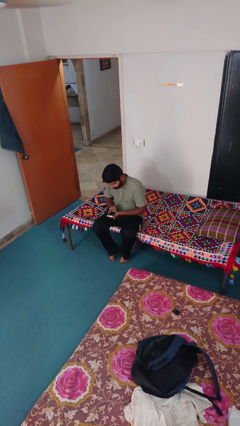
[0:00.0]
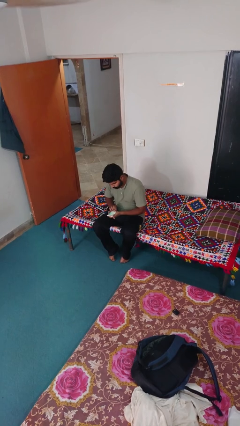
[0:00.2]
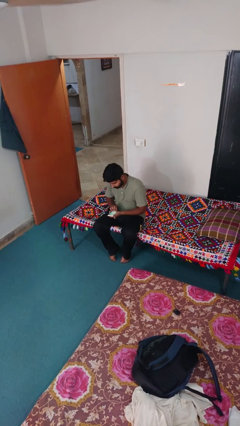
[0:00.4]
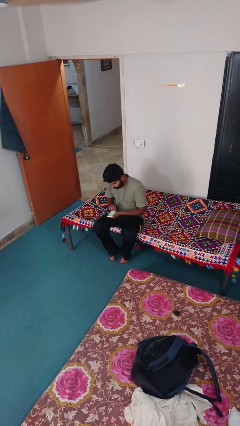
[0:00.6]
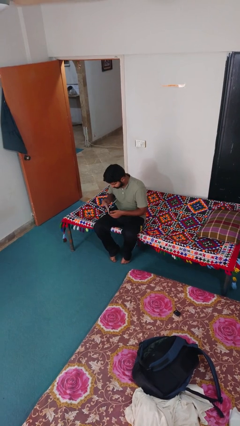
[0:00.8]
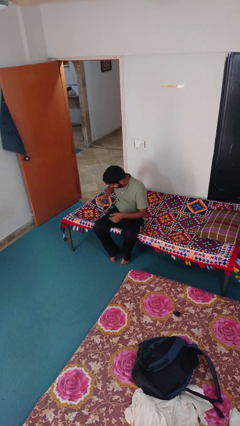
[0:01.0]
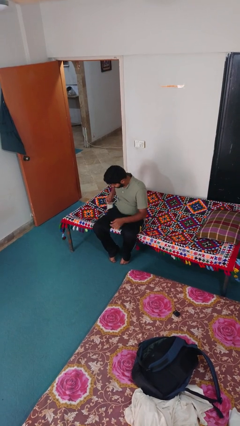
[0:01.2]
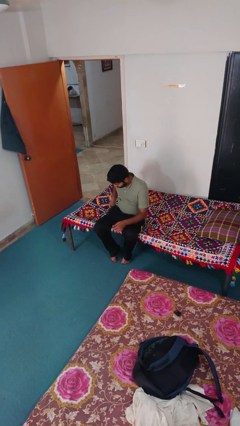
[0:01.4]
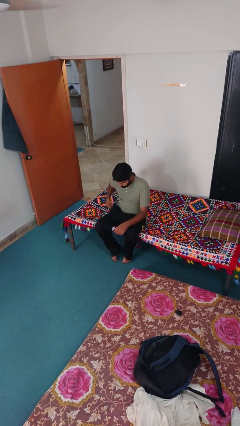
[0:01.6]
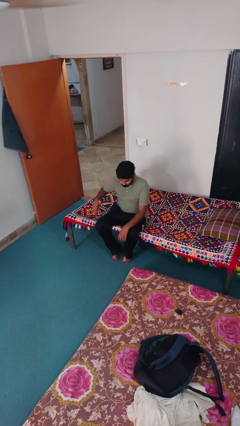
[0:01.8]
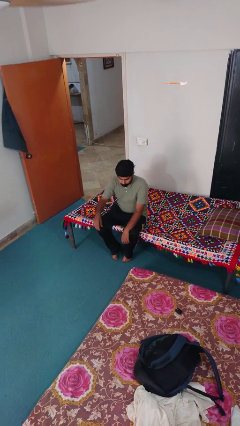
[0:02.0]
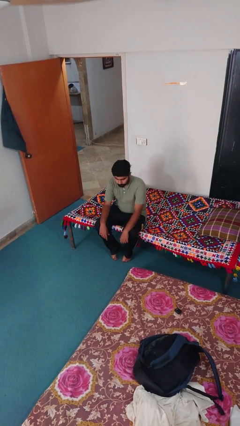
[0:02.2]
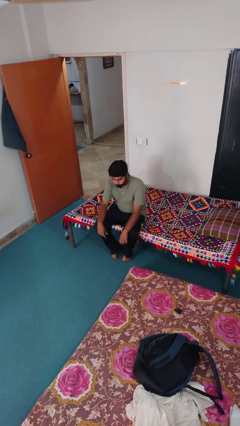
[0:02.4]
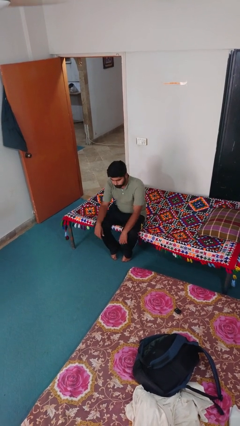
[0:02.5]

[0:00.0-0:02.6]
person puts phone into pocket

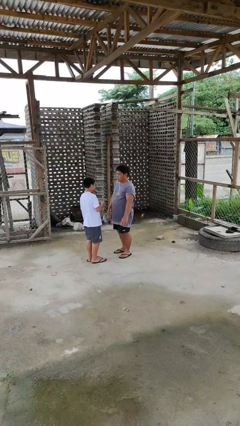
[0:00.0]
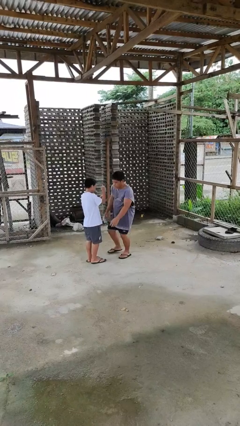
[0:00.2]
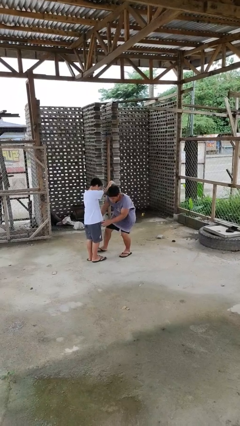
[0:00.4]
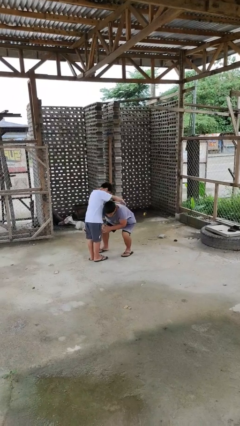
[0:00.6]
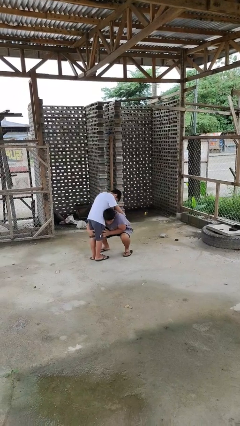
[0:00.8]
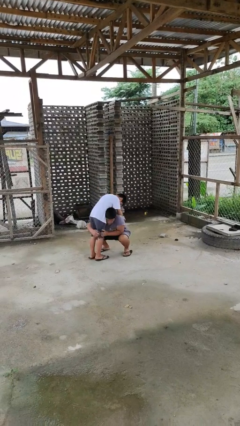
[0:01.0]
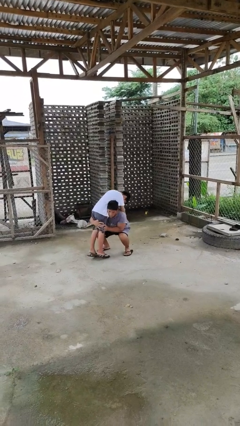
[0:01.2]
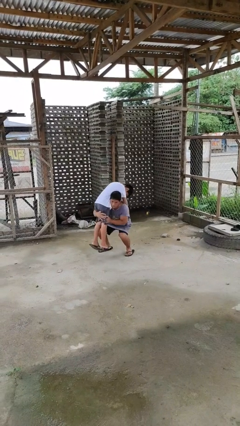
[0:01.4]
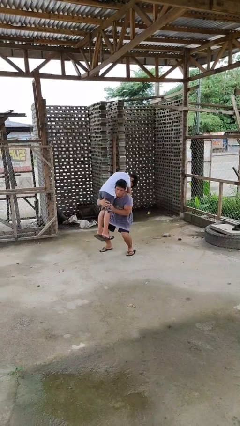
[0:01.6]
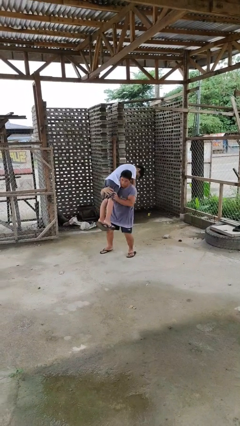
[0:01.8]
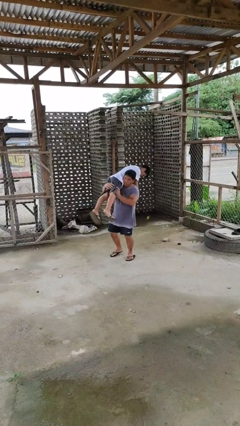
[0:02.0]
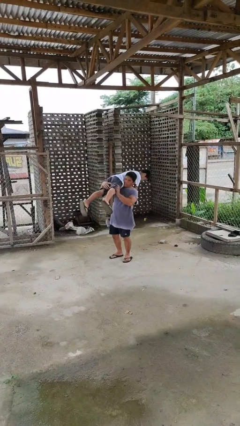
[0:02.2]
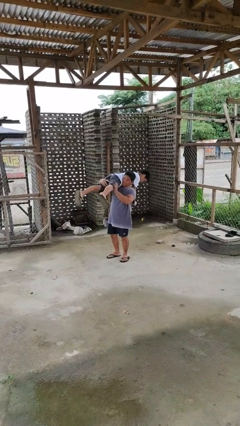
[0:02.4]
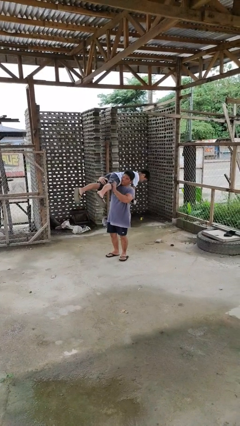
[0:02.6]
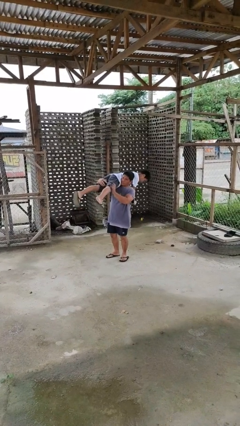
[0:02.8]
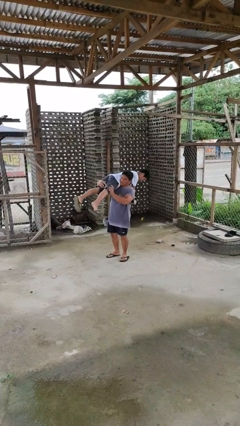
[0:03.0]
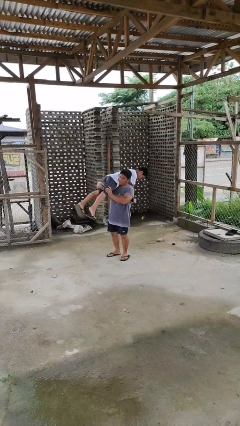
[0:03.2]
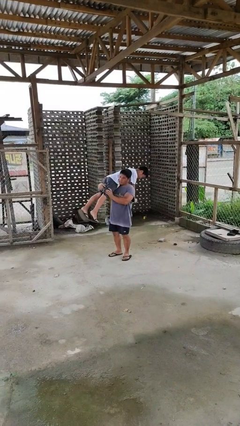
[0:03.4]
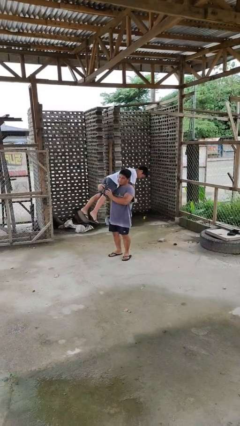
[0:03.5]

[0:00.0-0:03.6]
person carries person over shoulder

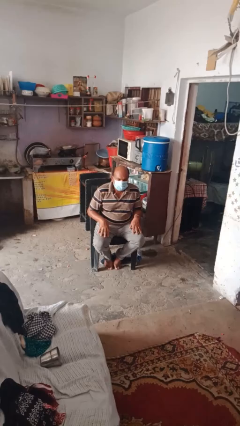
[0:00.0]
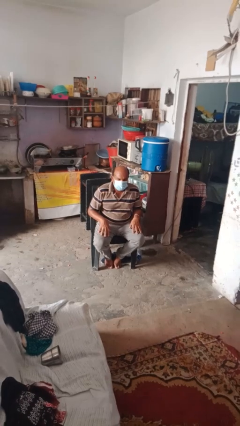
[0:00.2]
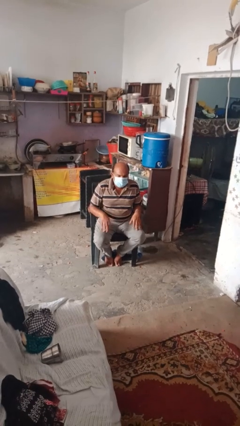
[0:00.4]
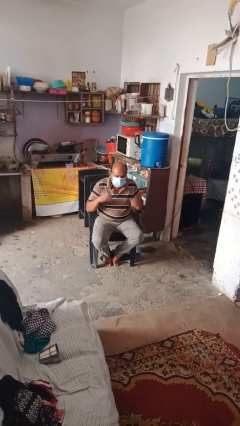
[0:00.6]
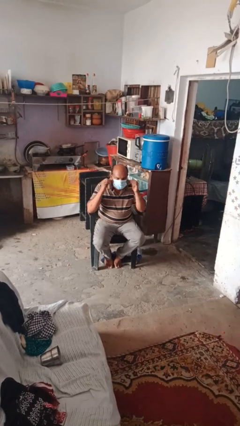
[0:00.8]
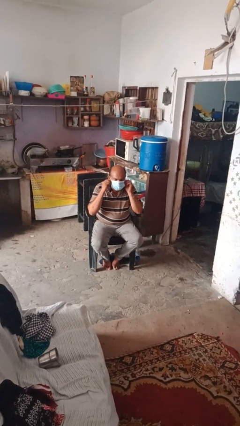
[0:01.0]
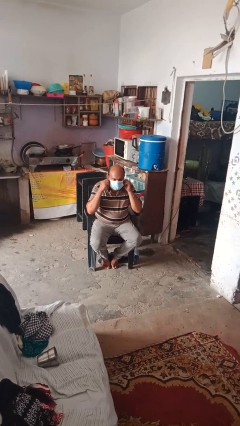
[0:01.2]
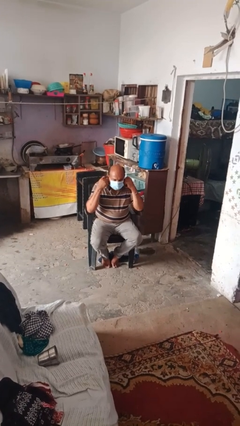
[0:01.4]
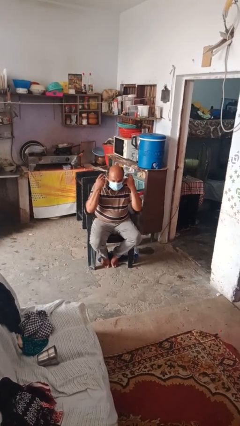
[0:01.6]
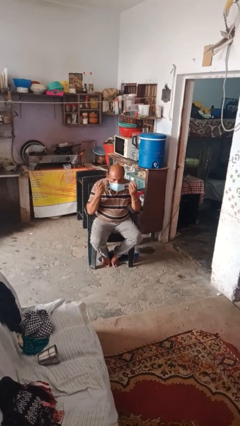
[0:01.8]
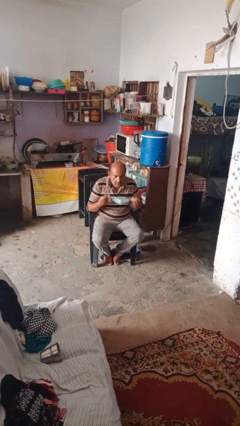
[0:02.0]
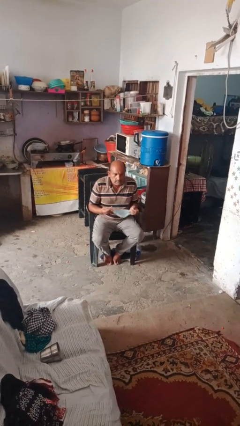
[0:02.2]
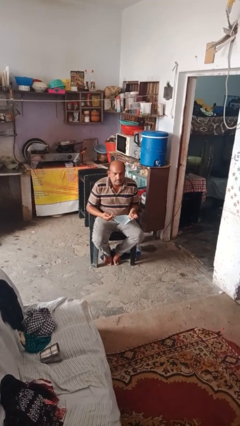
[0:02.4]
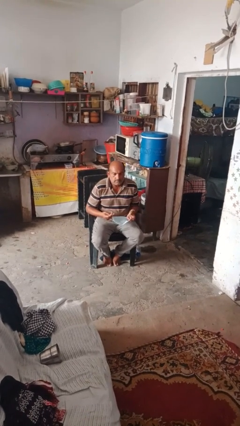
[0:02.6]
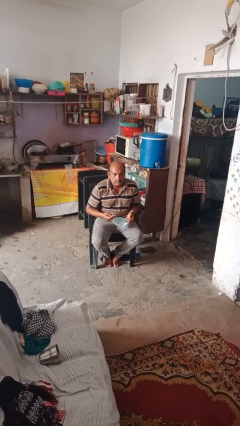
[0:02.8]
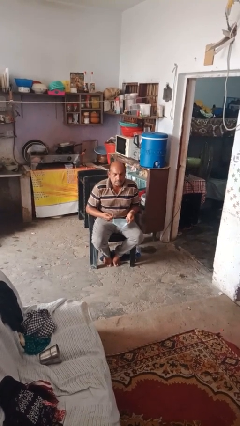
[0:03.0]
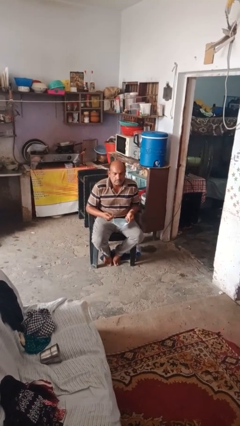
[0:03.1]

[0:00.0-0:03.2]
person takes off facemask

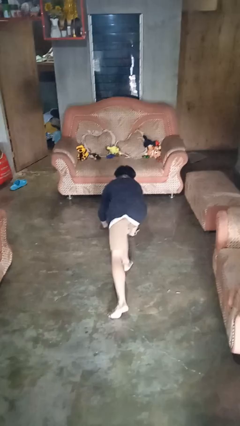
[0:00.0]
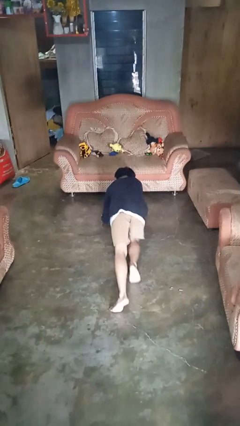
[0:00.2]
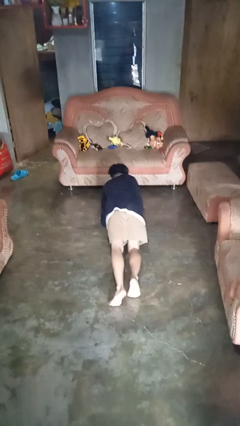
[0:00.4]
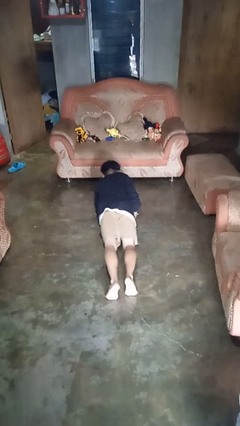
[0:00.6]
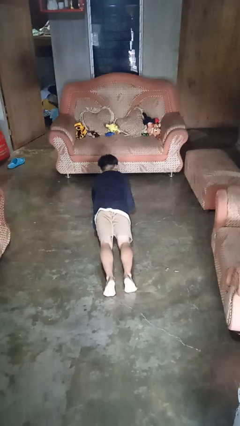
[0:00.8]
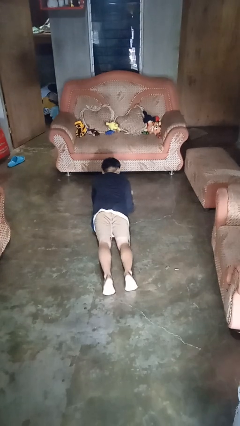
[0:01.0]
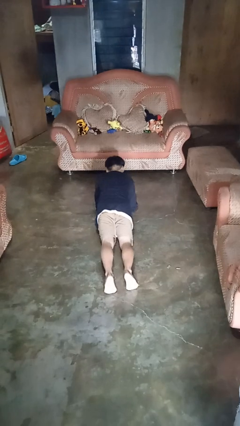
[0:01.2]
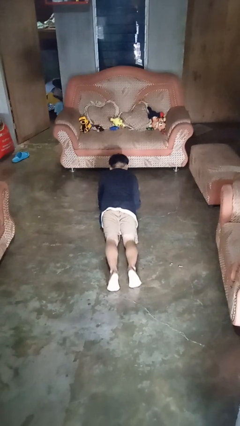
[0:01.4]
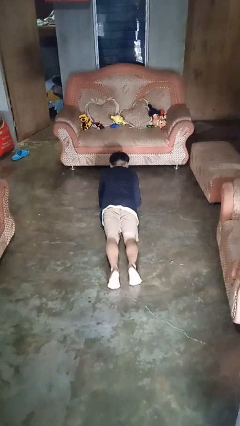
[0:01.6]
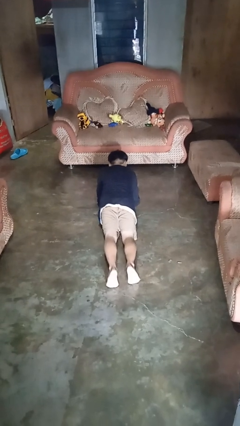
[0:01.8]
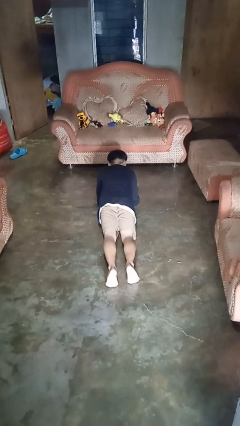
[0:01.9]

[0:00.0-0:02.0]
person exercises with plank

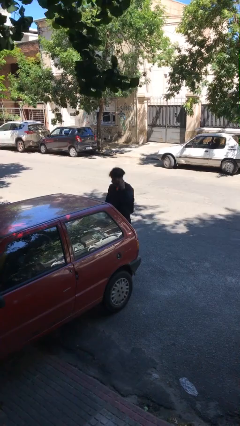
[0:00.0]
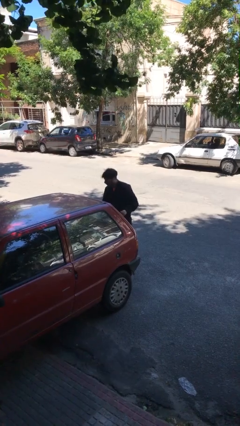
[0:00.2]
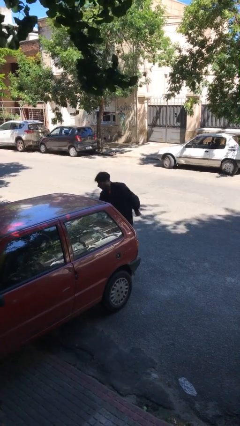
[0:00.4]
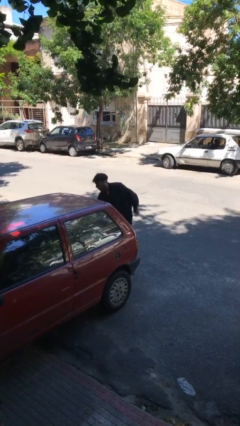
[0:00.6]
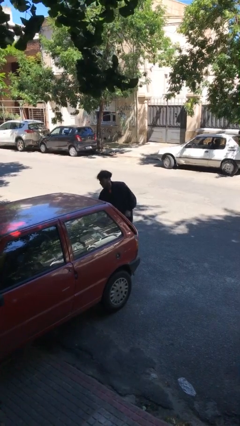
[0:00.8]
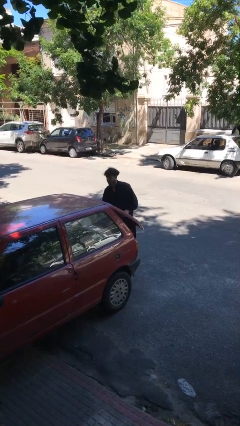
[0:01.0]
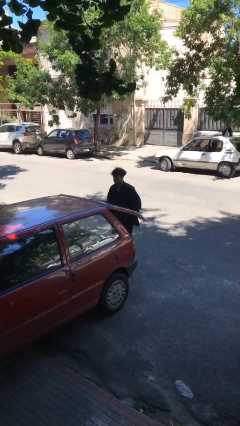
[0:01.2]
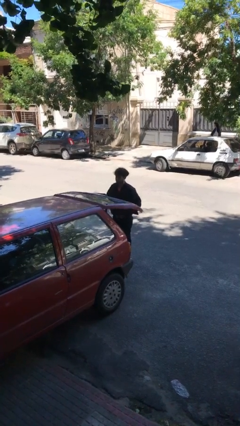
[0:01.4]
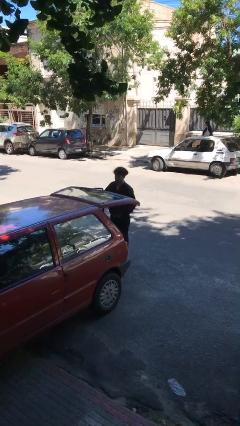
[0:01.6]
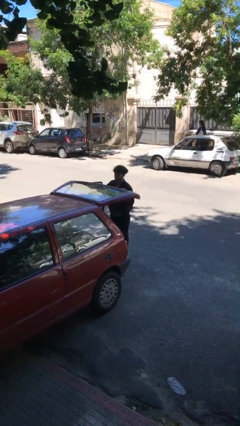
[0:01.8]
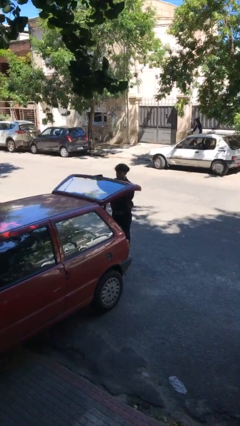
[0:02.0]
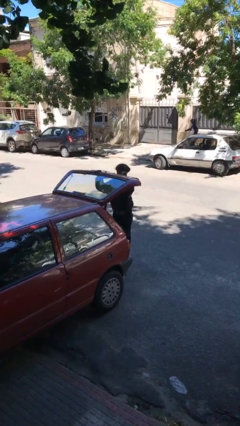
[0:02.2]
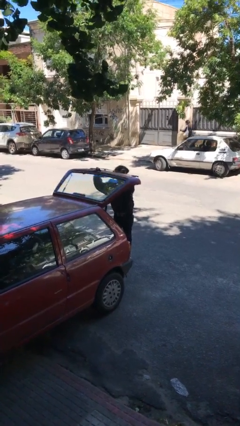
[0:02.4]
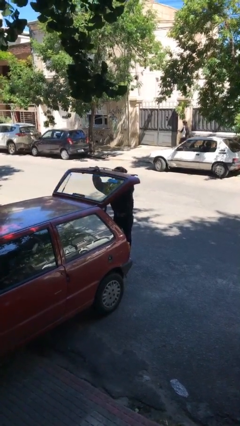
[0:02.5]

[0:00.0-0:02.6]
person opens car trunk

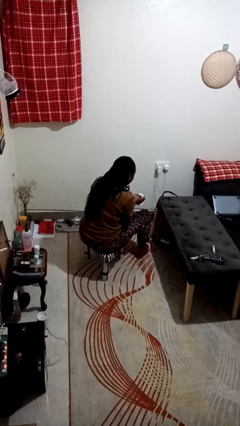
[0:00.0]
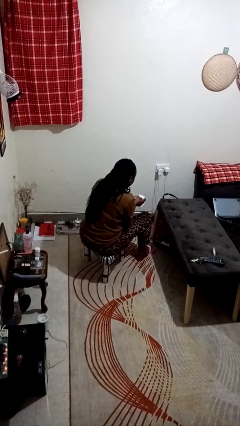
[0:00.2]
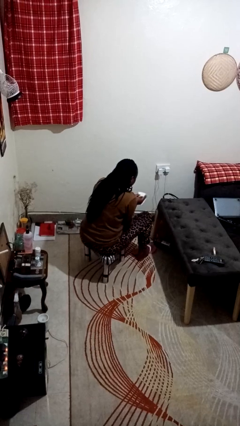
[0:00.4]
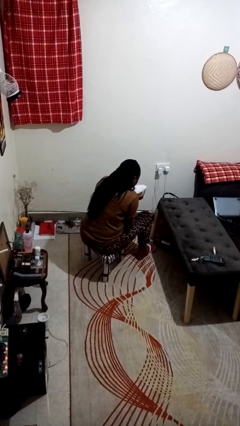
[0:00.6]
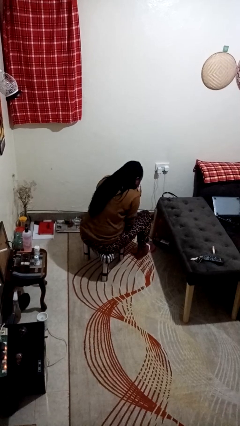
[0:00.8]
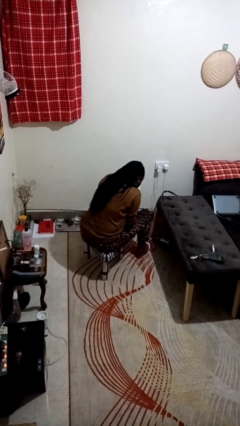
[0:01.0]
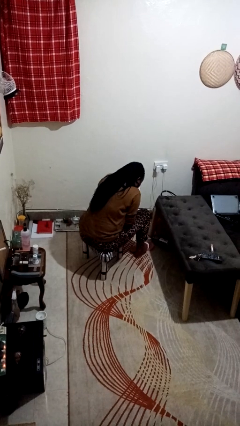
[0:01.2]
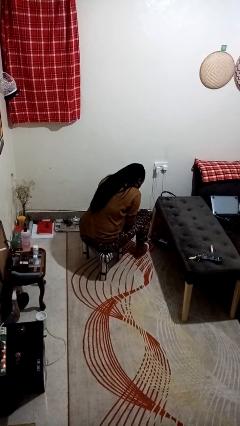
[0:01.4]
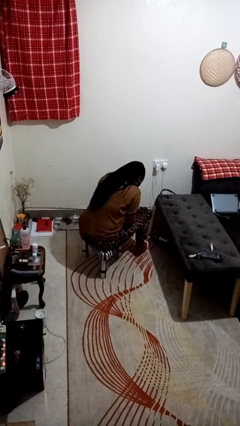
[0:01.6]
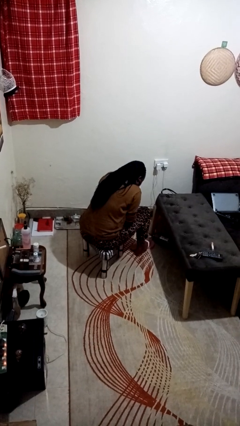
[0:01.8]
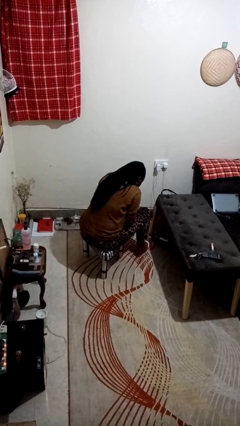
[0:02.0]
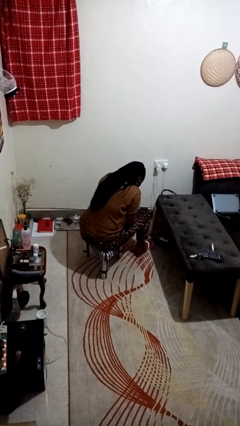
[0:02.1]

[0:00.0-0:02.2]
person blows nose

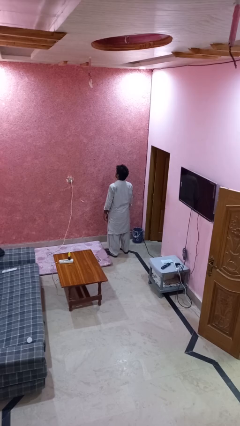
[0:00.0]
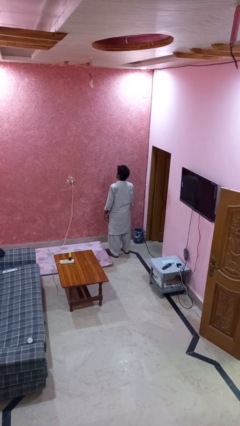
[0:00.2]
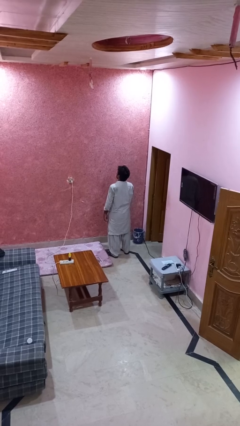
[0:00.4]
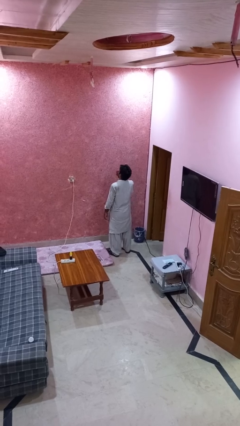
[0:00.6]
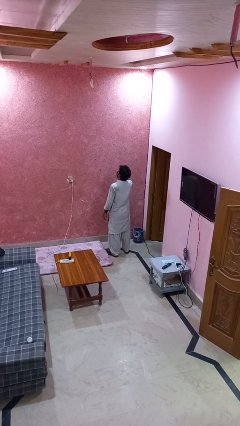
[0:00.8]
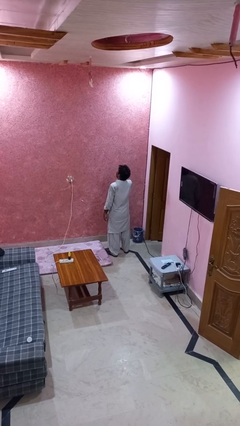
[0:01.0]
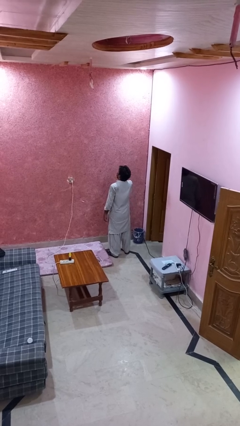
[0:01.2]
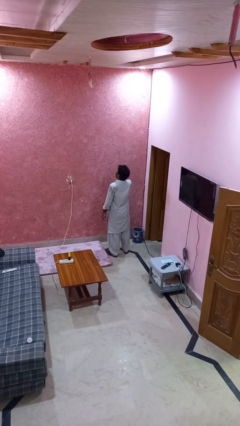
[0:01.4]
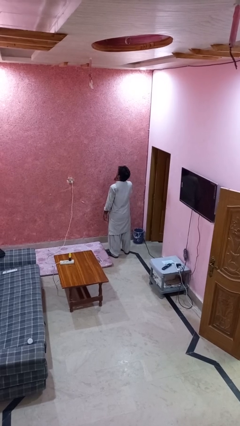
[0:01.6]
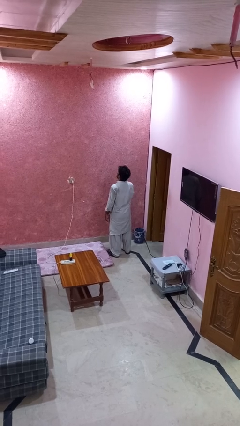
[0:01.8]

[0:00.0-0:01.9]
person yawns
